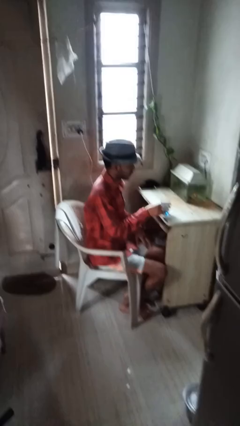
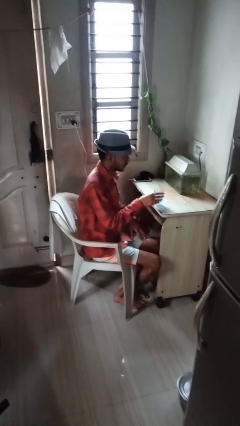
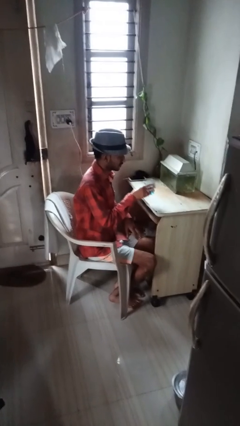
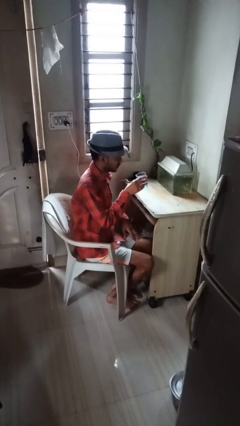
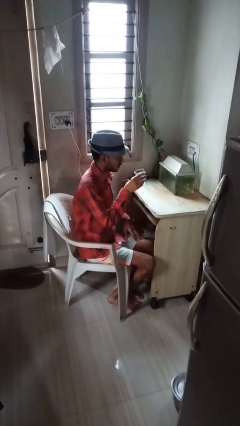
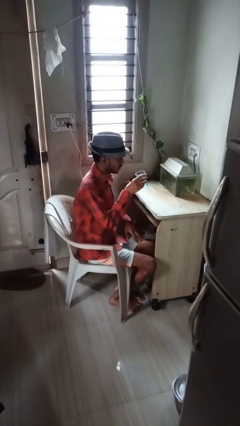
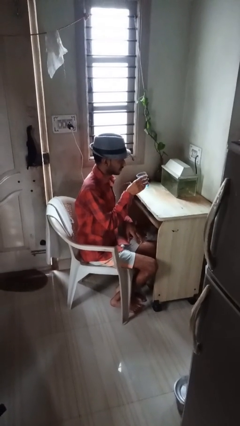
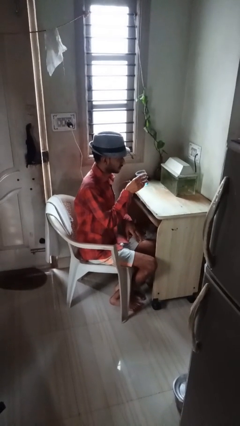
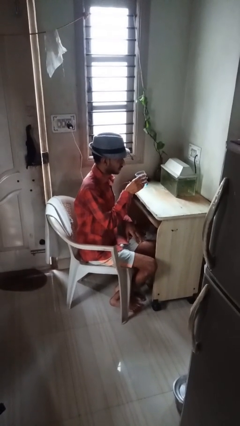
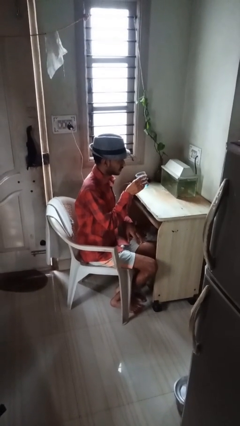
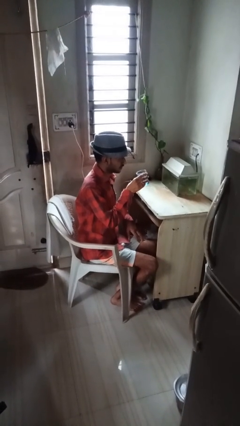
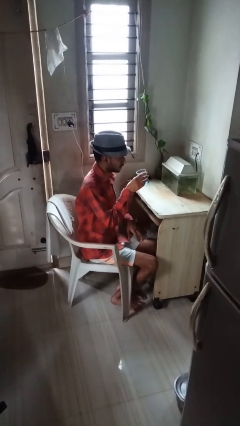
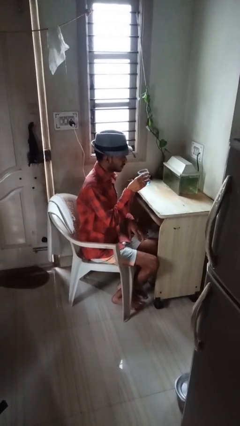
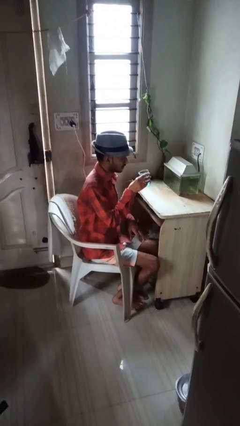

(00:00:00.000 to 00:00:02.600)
person picks up object from table

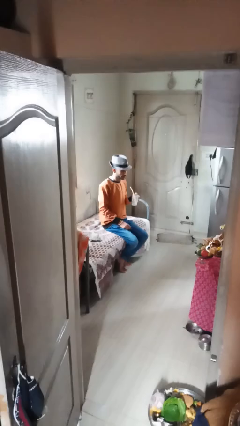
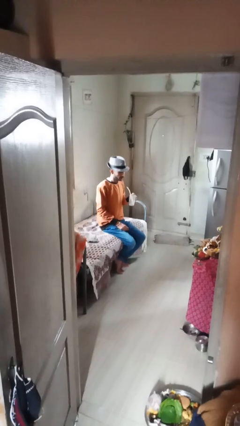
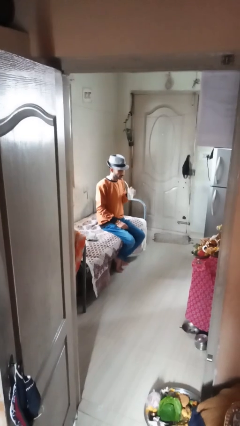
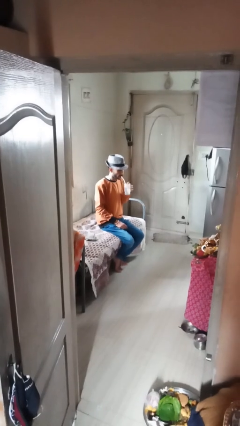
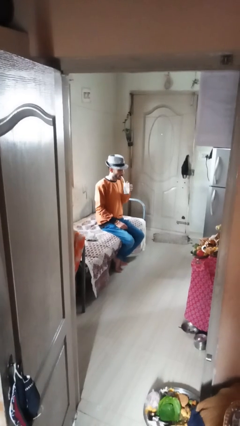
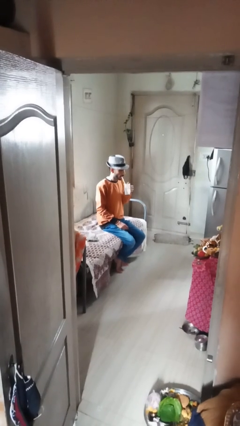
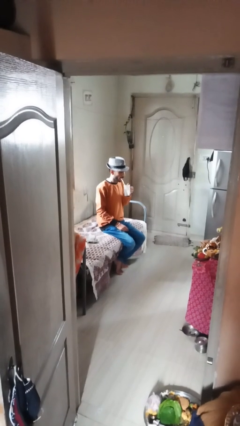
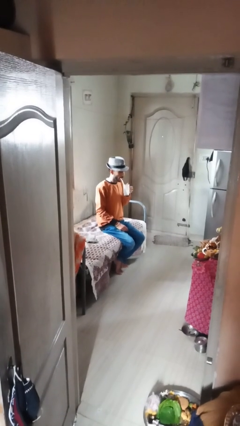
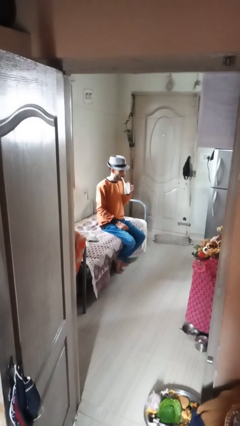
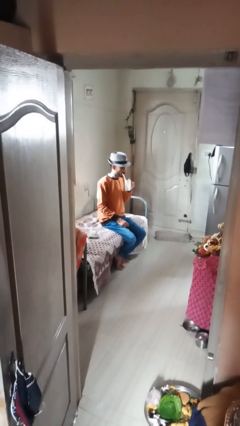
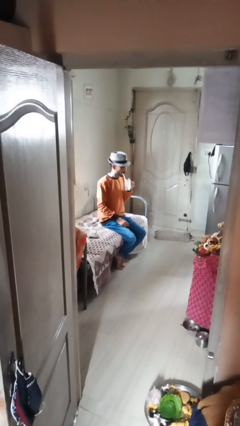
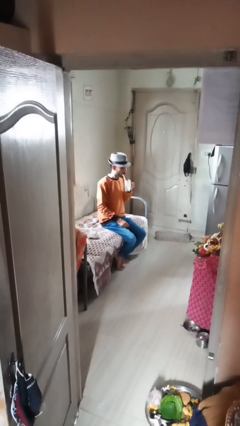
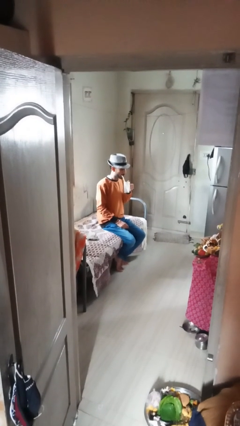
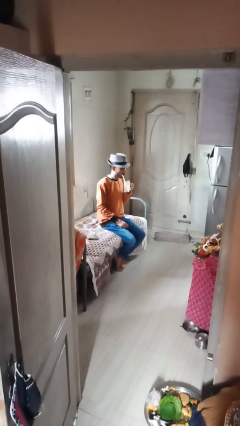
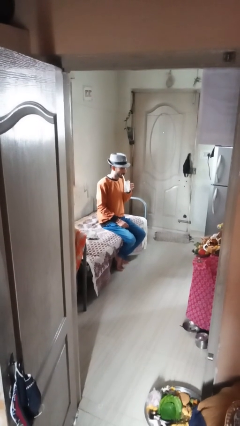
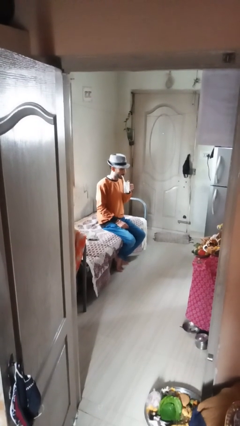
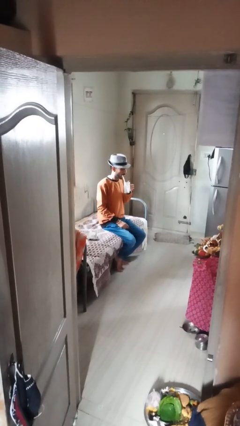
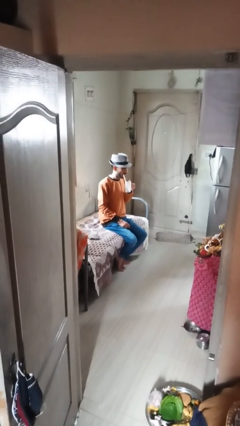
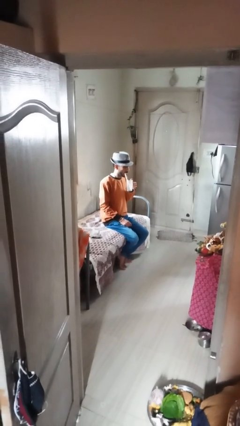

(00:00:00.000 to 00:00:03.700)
person drinks from straw

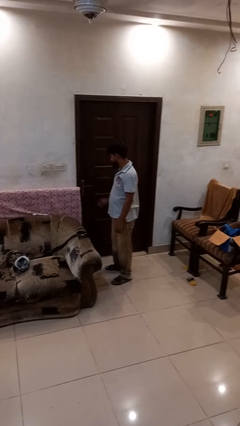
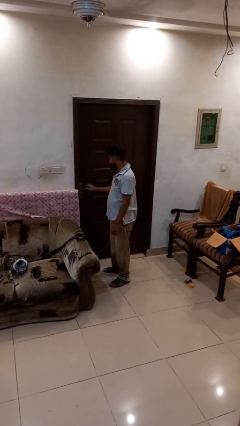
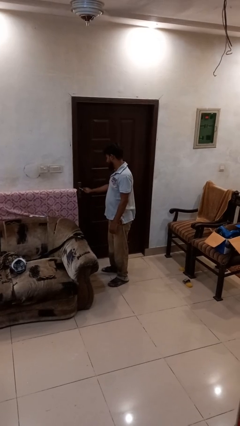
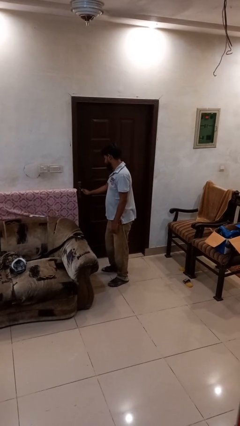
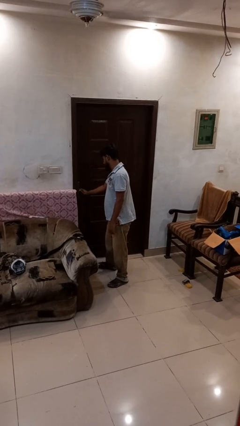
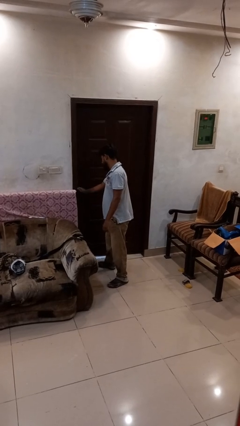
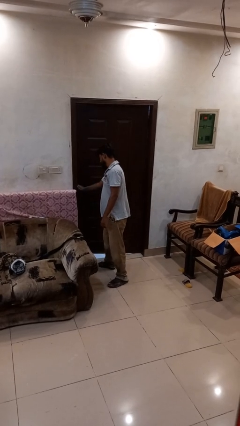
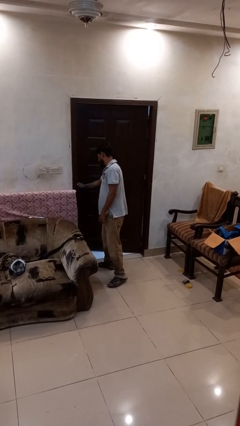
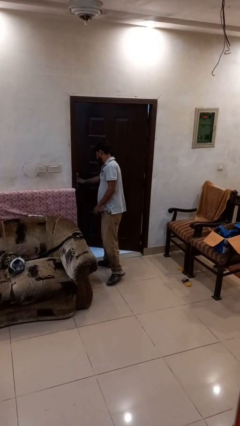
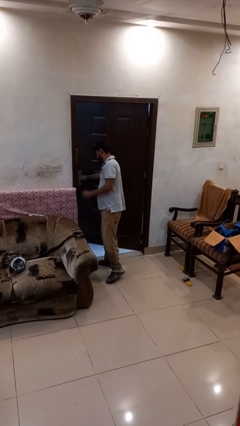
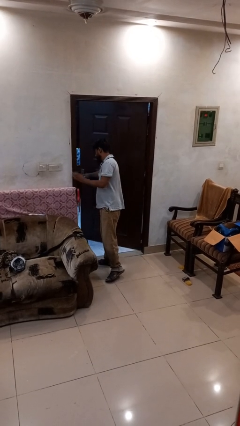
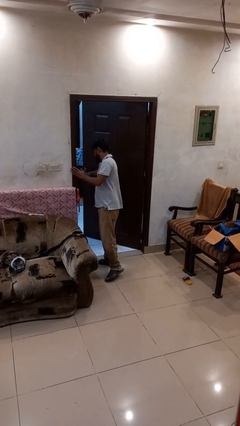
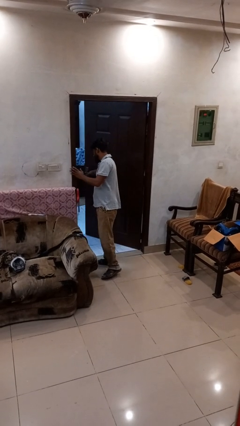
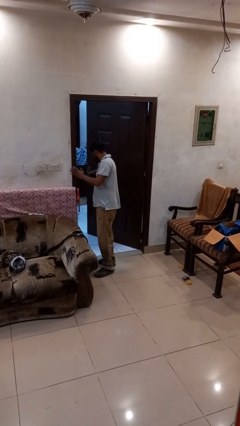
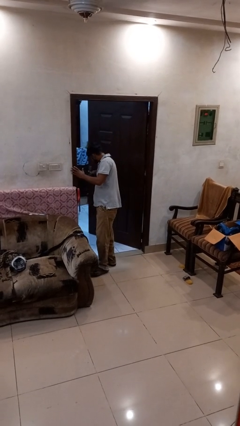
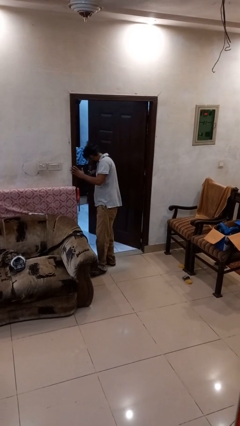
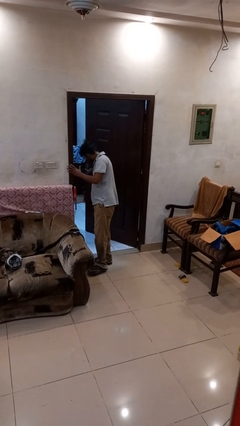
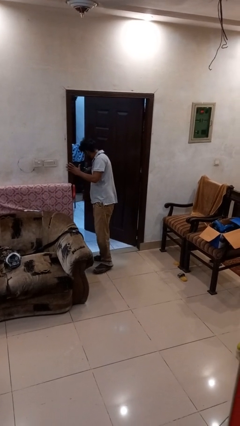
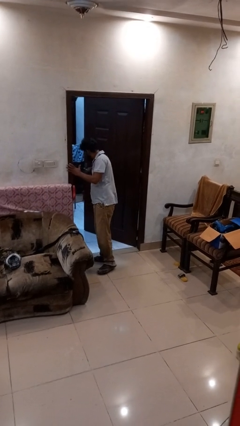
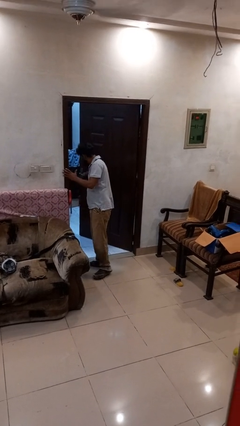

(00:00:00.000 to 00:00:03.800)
person opens facility door

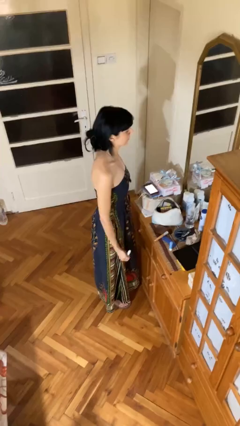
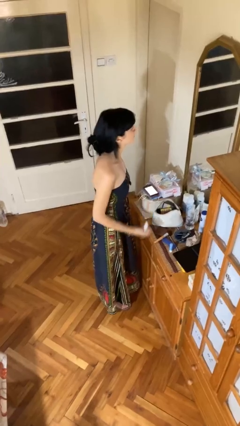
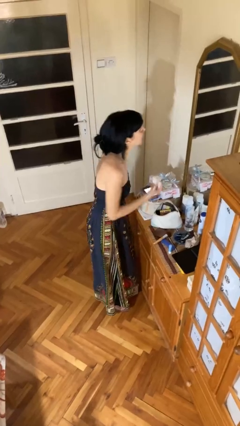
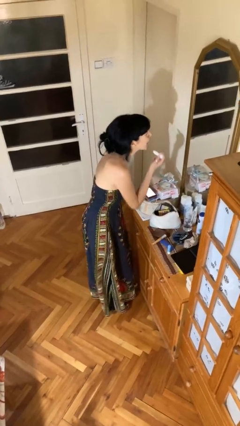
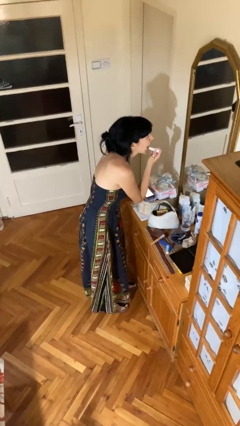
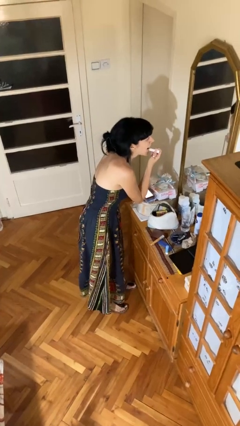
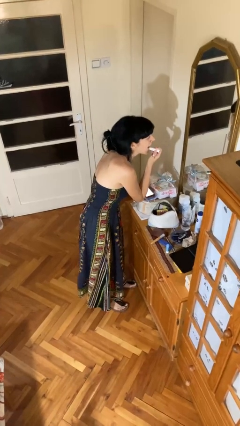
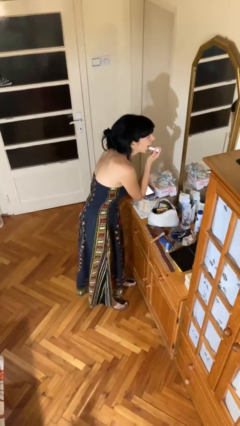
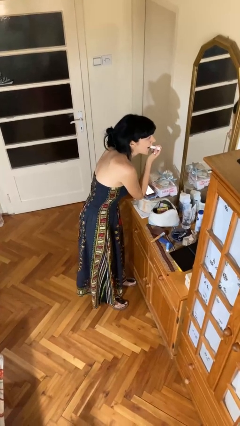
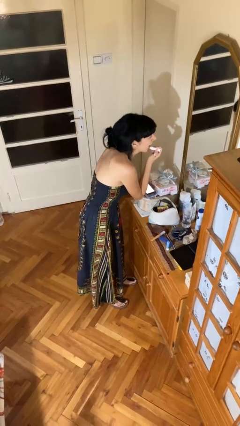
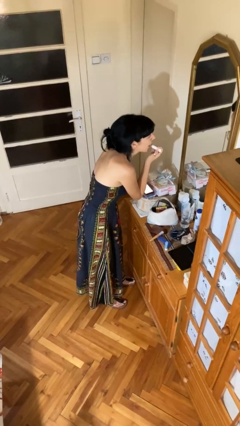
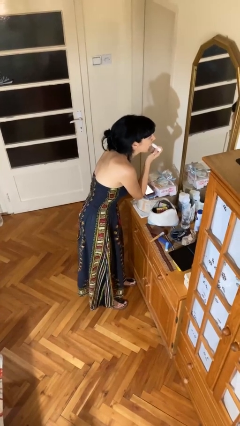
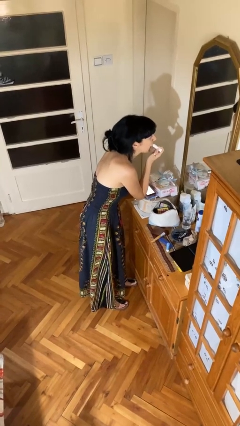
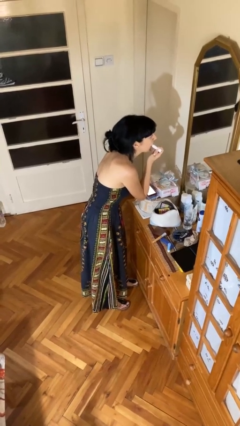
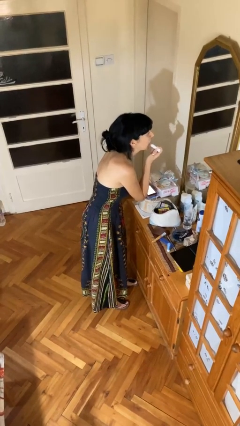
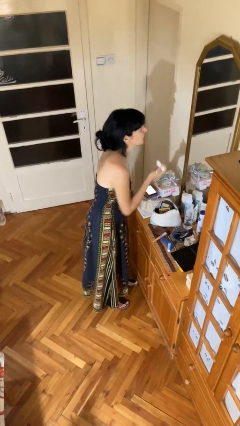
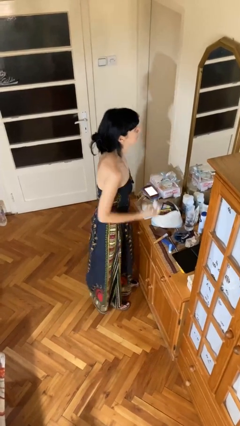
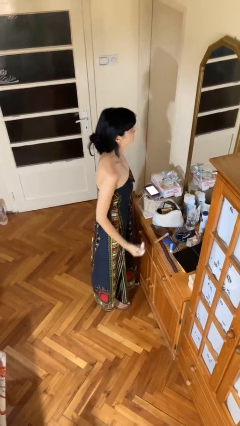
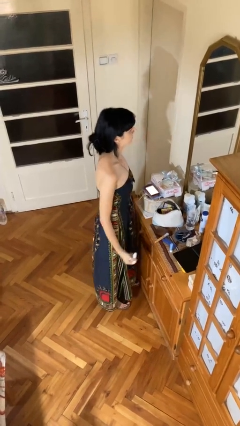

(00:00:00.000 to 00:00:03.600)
person applies lip makeup

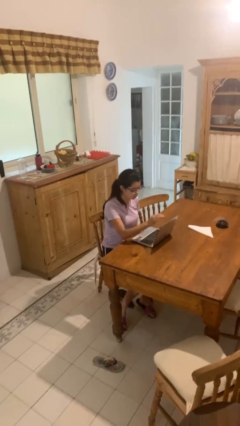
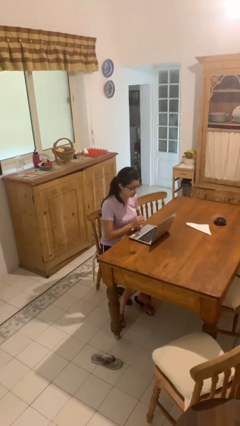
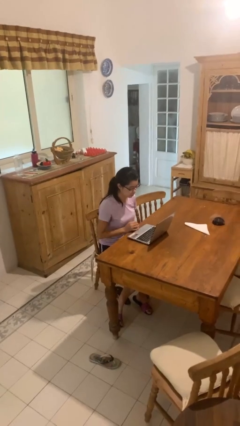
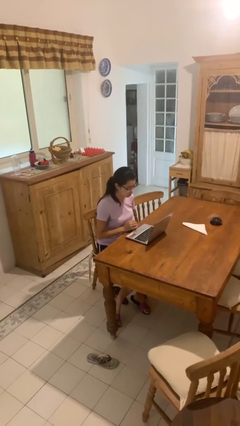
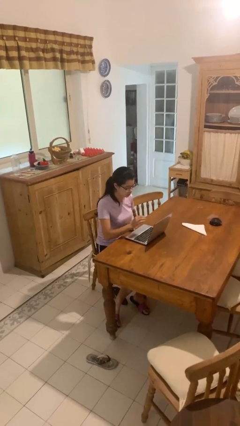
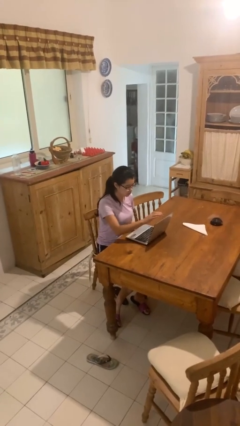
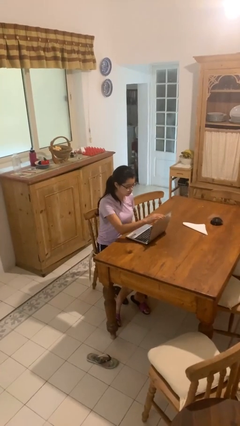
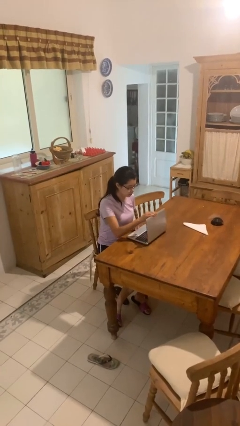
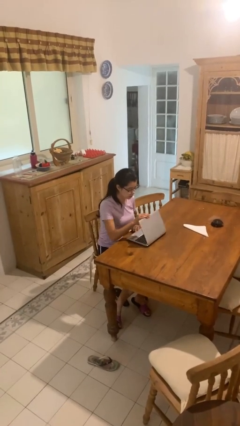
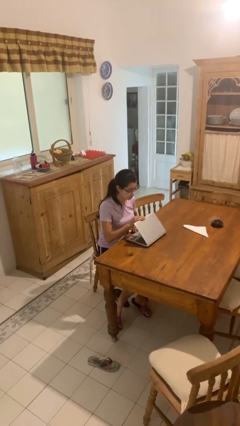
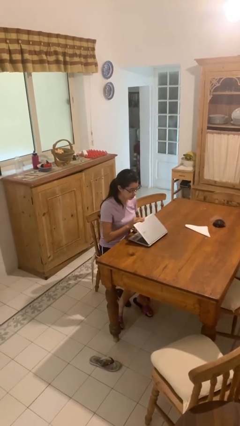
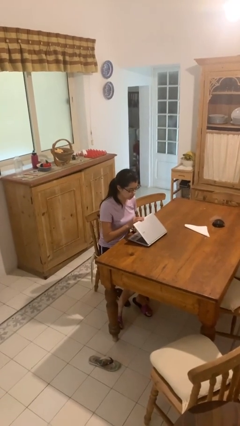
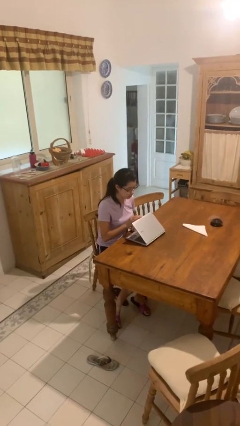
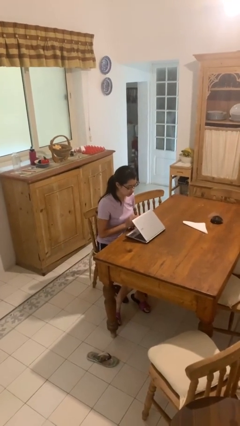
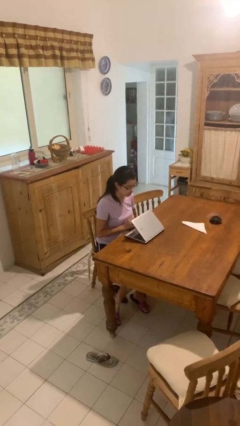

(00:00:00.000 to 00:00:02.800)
person closes laptop

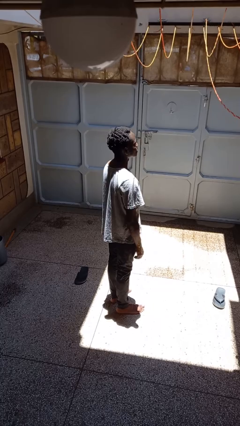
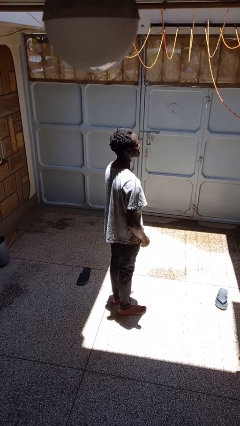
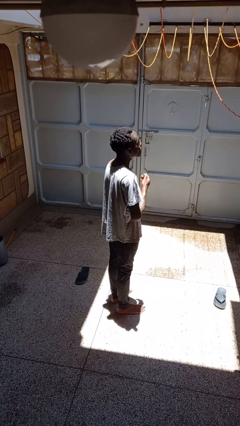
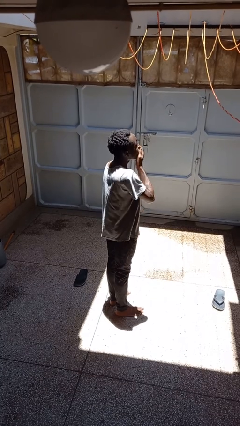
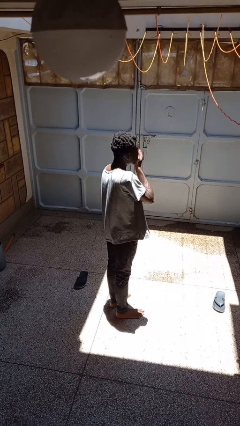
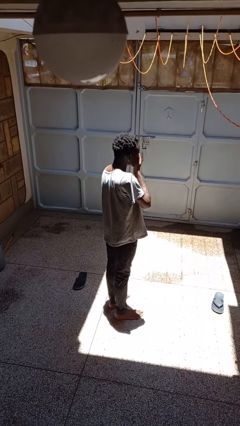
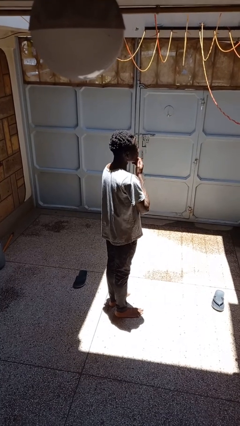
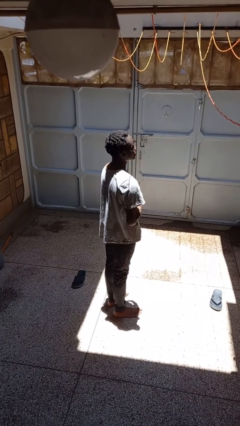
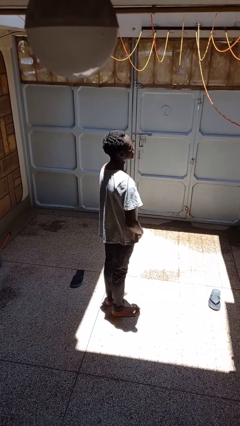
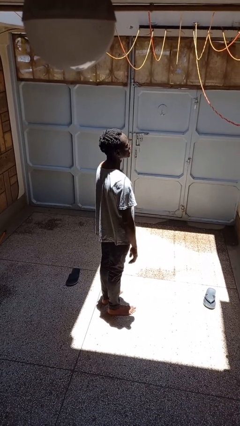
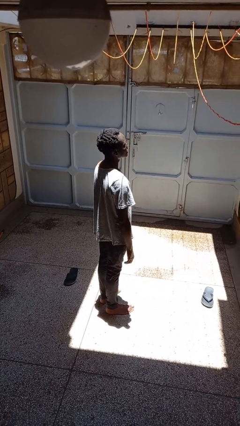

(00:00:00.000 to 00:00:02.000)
person sneezes into hand
